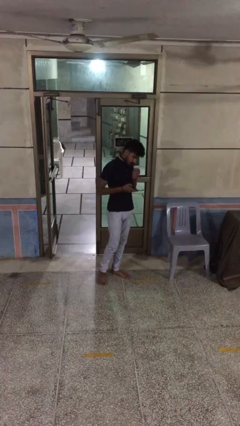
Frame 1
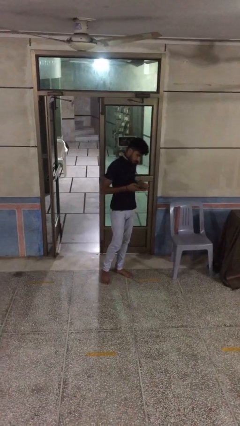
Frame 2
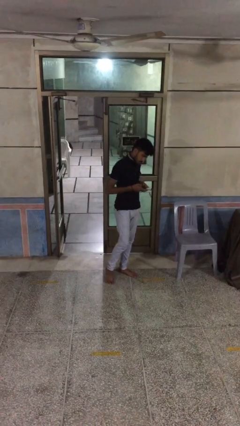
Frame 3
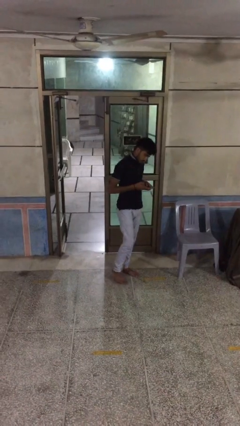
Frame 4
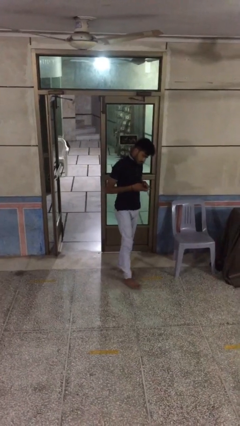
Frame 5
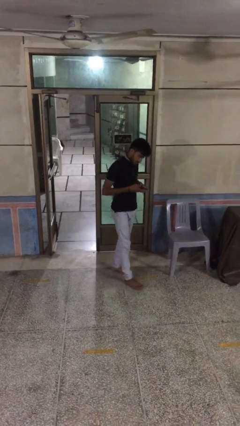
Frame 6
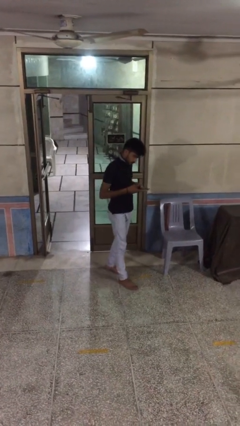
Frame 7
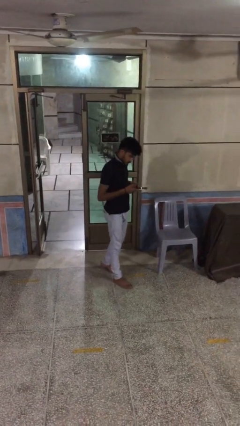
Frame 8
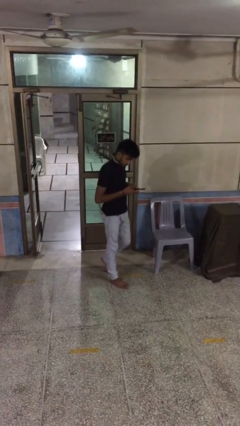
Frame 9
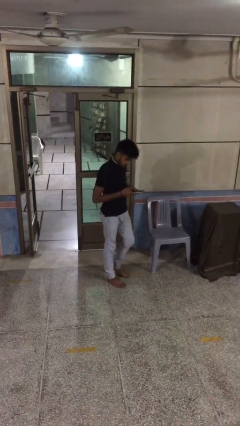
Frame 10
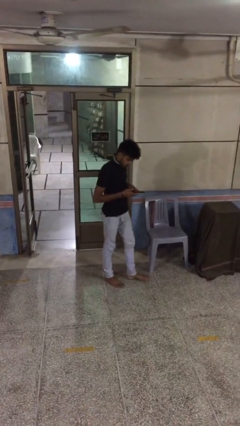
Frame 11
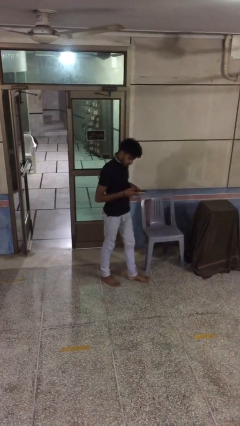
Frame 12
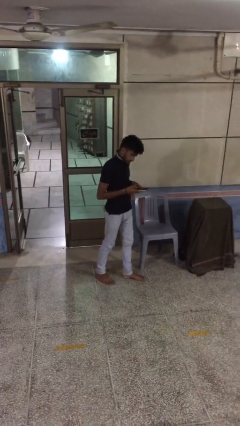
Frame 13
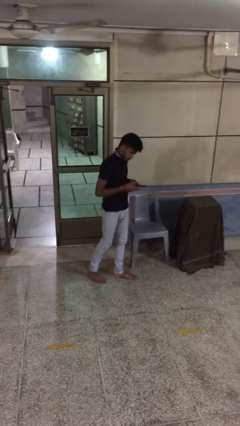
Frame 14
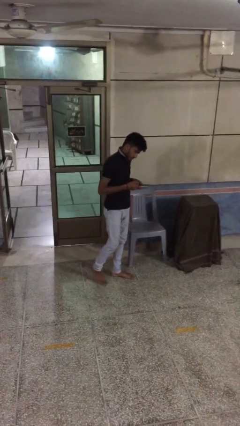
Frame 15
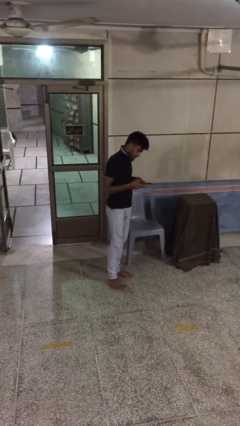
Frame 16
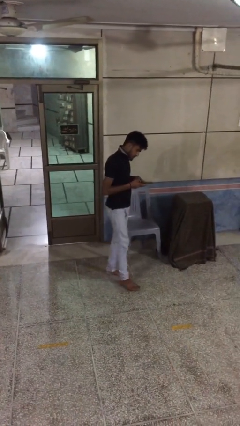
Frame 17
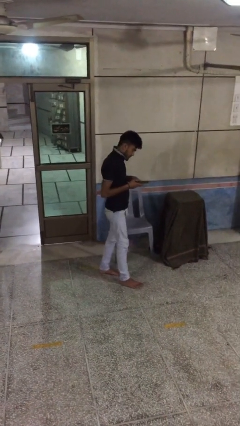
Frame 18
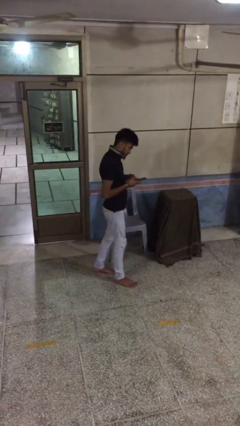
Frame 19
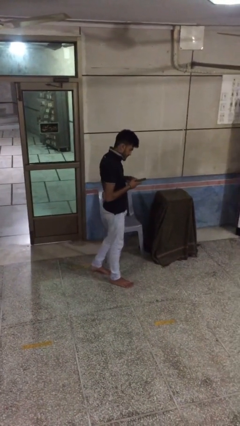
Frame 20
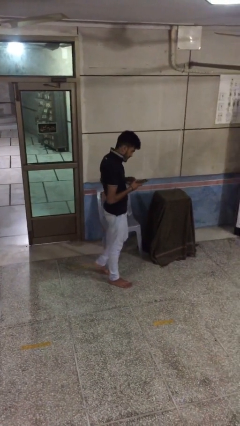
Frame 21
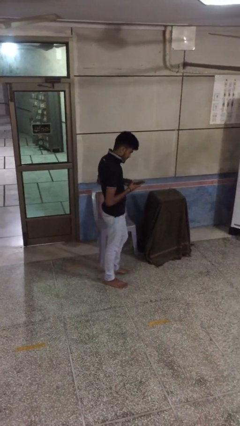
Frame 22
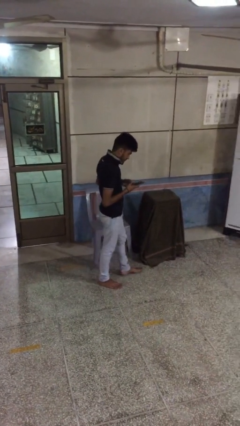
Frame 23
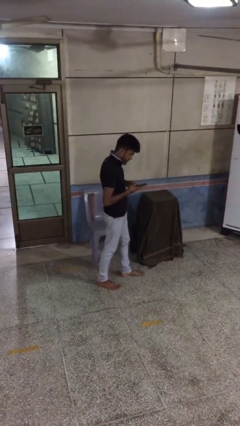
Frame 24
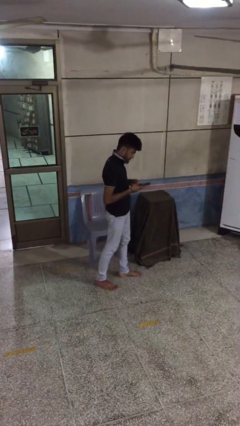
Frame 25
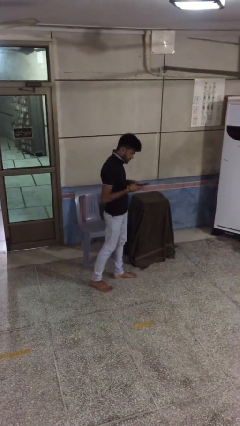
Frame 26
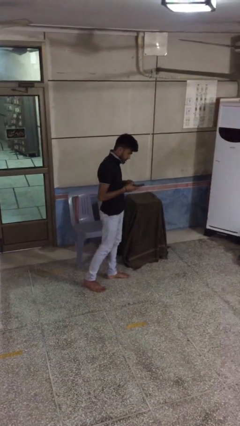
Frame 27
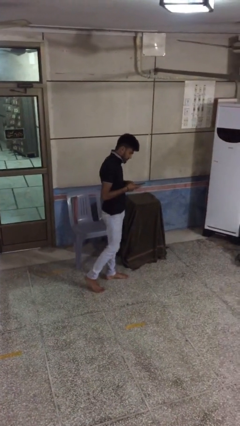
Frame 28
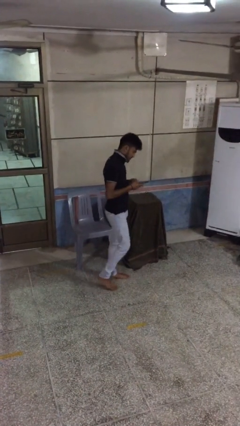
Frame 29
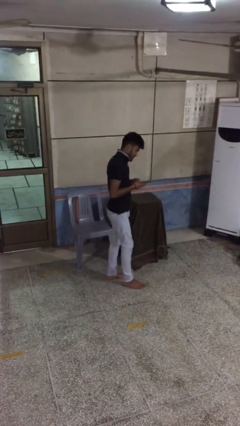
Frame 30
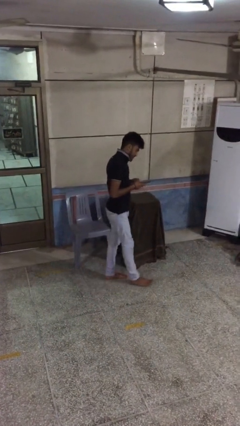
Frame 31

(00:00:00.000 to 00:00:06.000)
person texts on phone

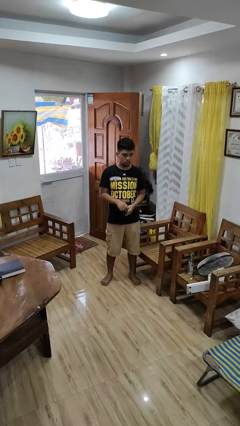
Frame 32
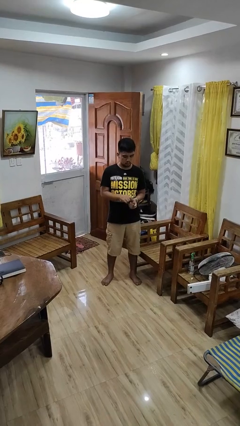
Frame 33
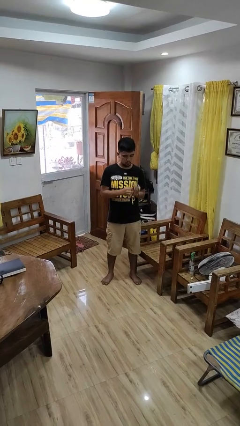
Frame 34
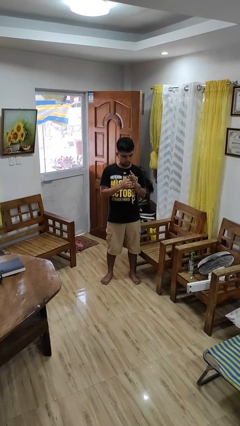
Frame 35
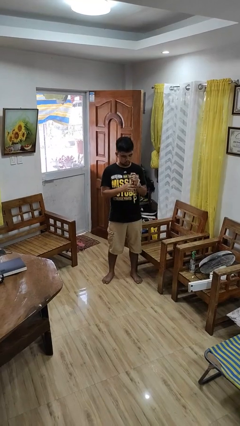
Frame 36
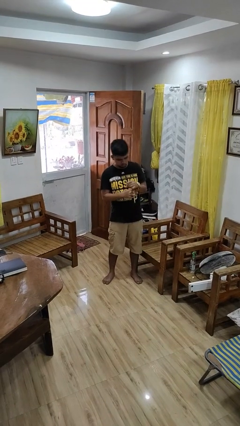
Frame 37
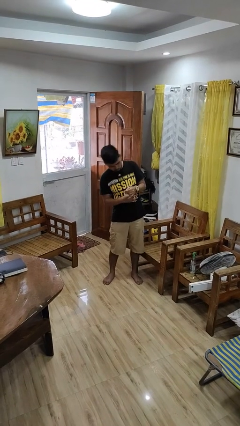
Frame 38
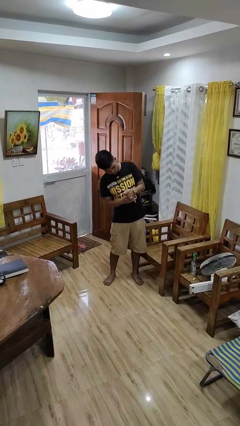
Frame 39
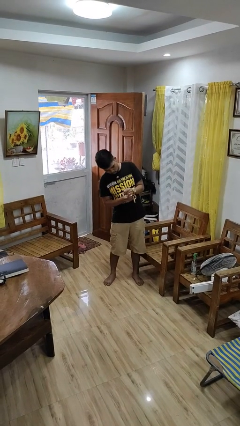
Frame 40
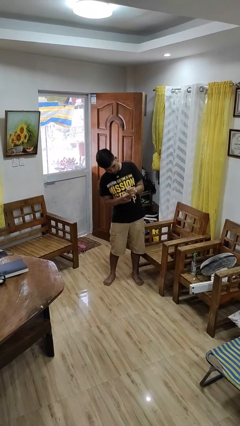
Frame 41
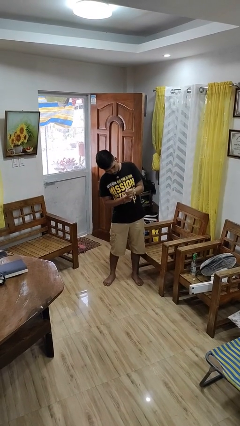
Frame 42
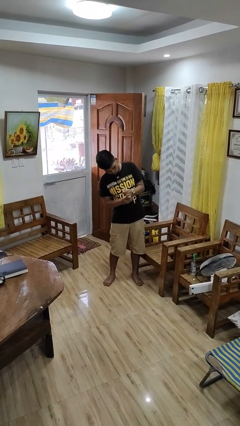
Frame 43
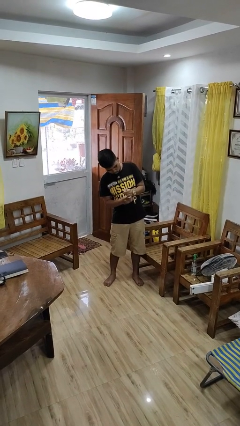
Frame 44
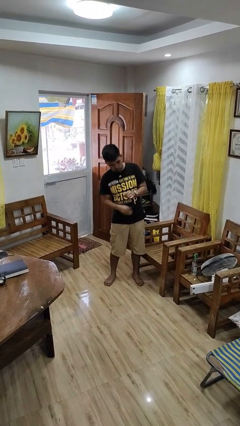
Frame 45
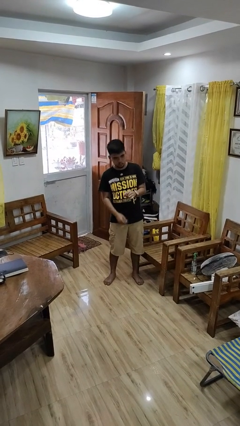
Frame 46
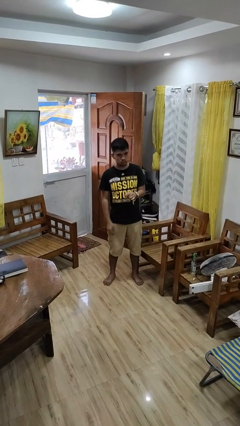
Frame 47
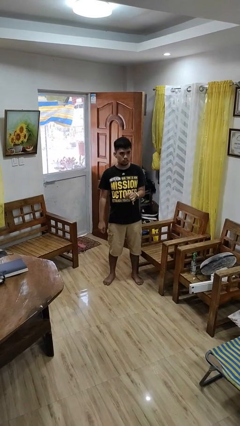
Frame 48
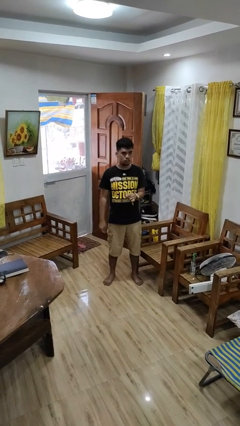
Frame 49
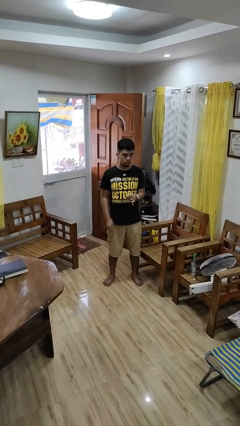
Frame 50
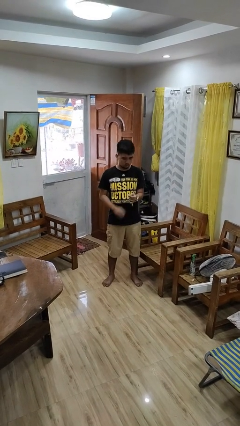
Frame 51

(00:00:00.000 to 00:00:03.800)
person puts on wristwatch

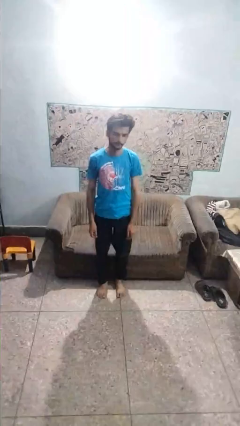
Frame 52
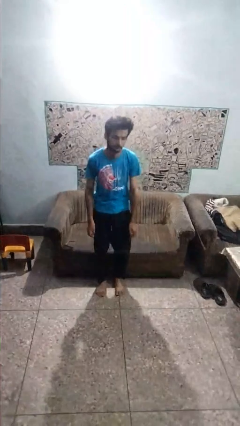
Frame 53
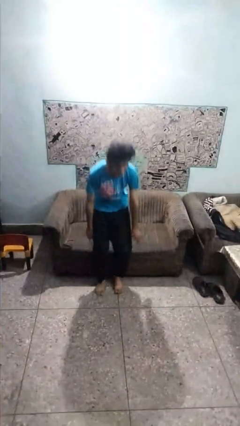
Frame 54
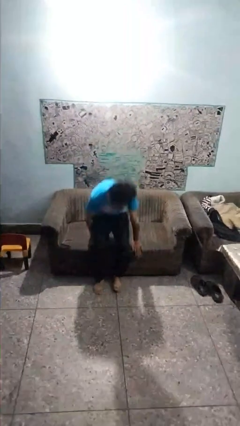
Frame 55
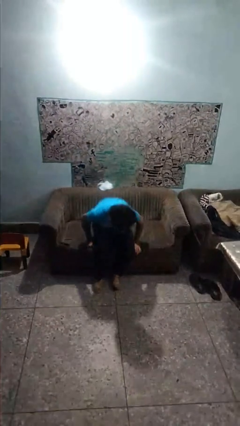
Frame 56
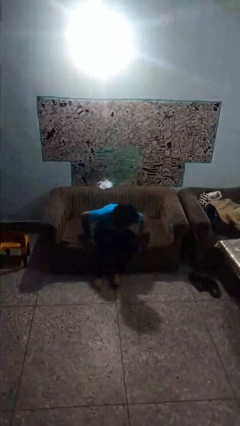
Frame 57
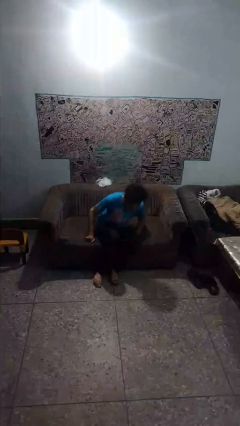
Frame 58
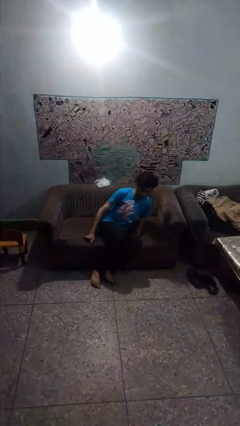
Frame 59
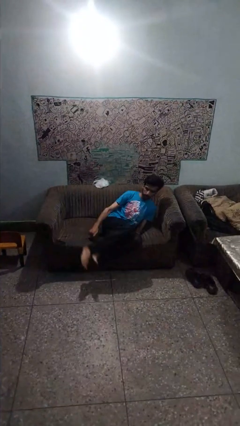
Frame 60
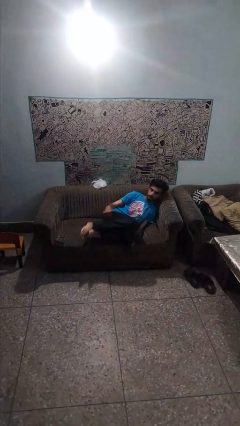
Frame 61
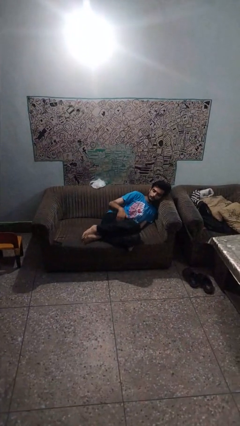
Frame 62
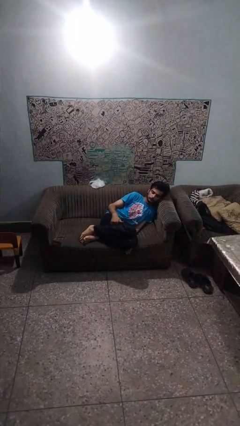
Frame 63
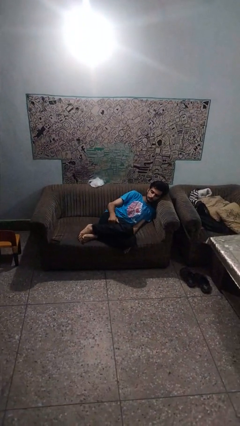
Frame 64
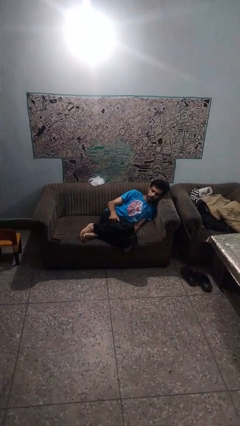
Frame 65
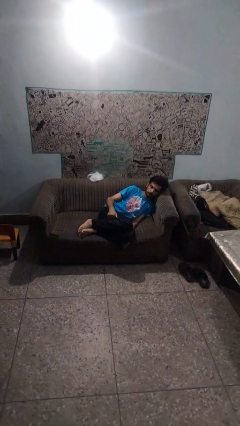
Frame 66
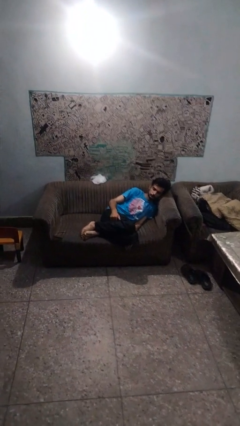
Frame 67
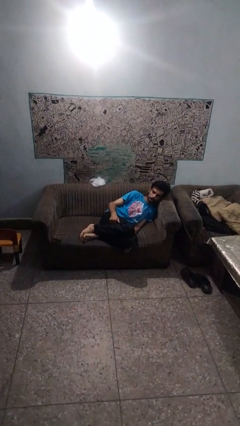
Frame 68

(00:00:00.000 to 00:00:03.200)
person lies down on couch

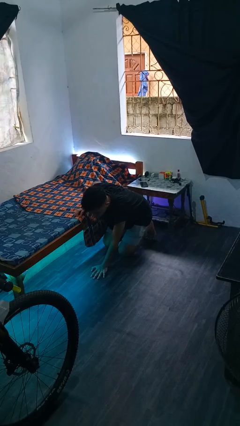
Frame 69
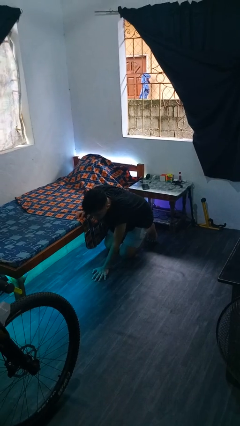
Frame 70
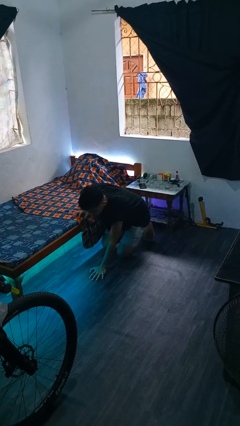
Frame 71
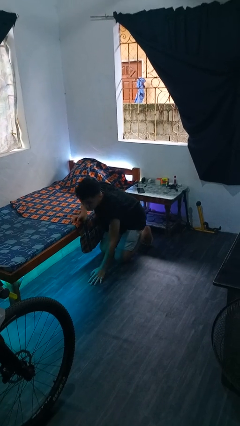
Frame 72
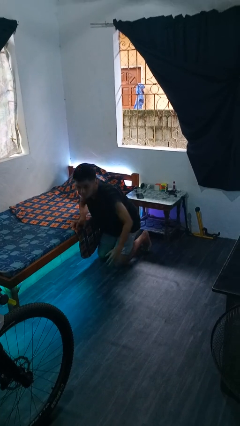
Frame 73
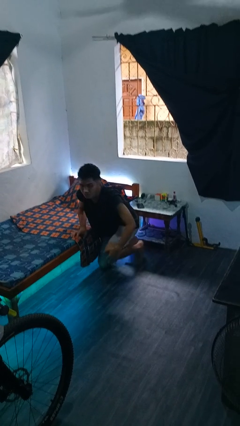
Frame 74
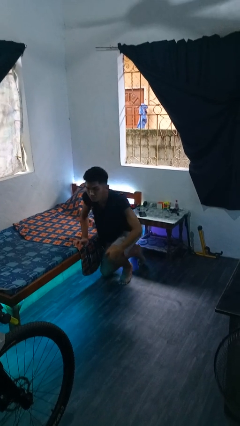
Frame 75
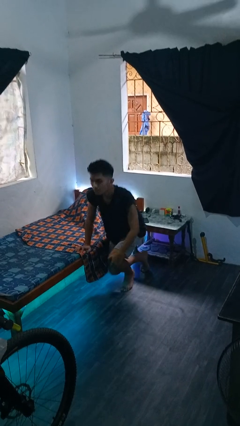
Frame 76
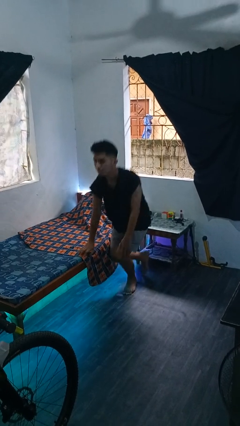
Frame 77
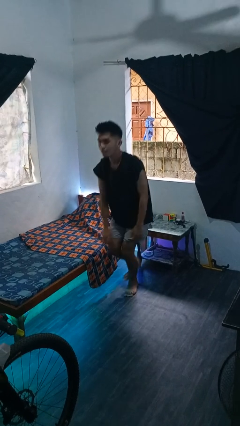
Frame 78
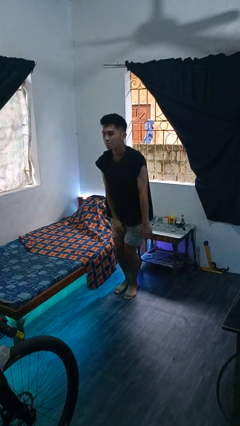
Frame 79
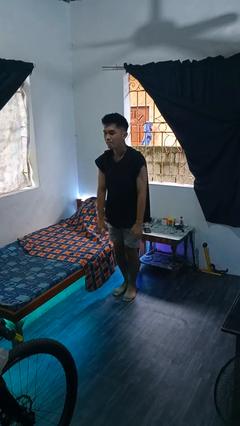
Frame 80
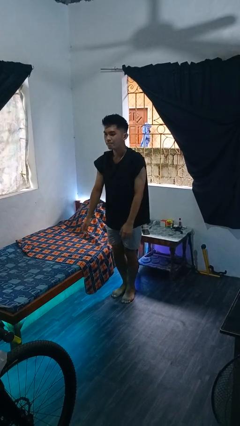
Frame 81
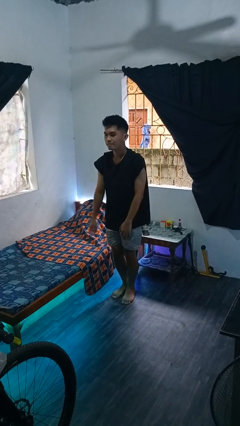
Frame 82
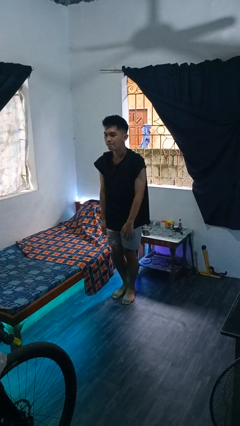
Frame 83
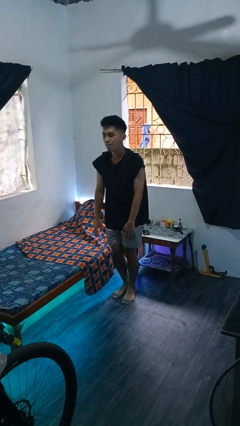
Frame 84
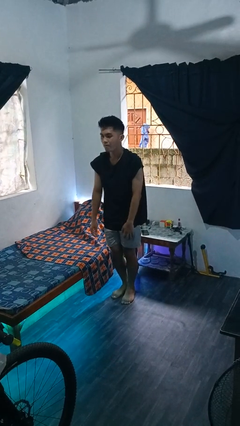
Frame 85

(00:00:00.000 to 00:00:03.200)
person stands up from floor

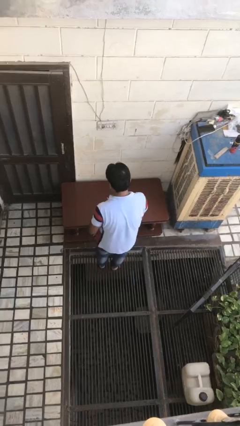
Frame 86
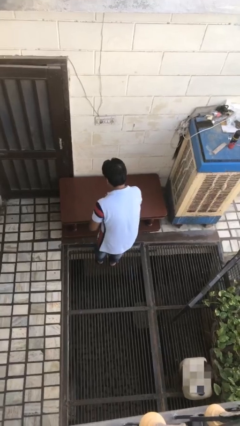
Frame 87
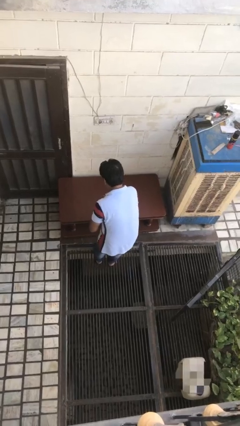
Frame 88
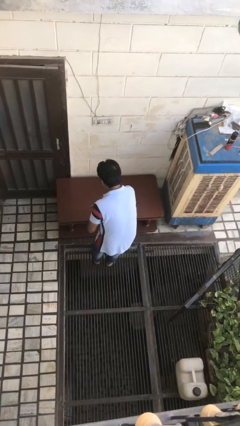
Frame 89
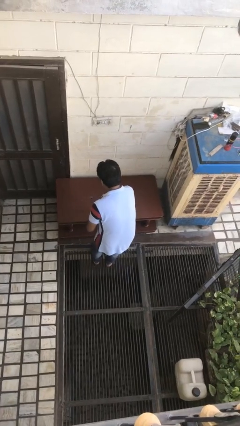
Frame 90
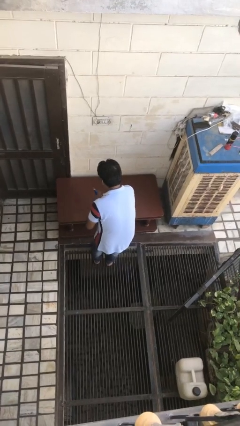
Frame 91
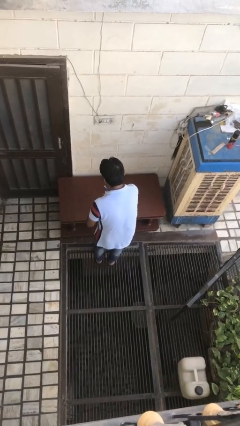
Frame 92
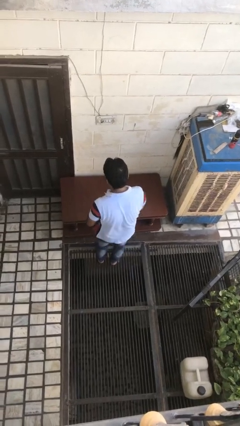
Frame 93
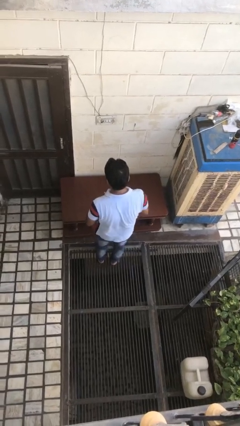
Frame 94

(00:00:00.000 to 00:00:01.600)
person sprays from bottle

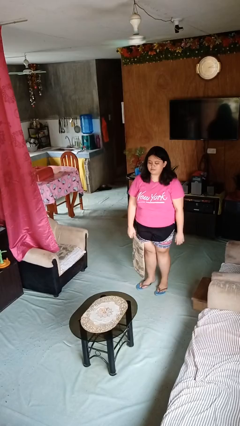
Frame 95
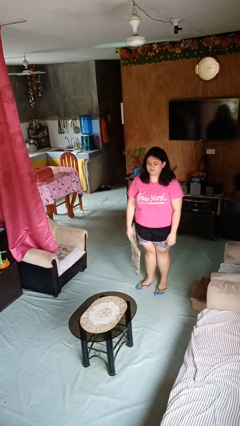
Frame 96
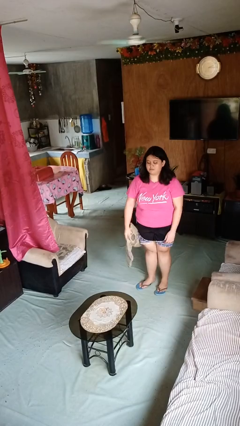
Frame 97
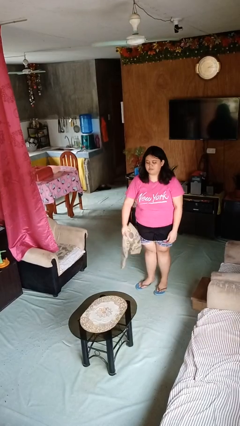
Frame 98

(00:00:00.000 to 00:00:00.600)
person throws object on table
